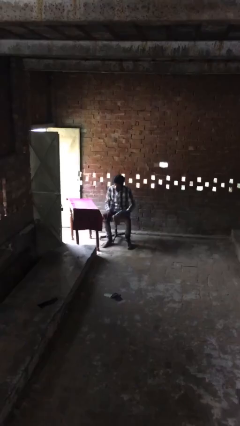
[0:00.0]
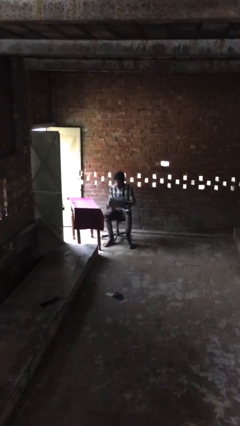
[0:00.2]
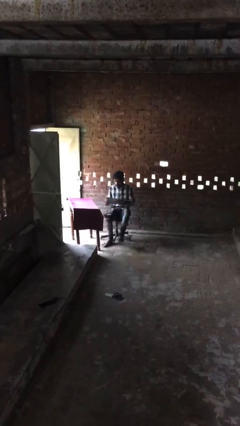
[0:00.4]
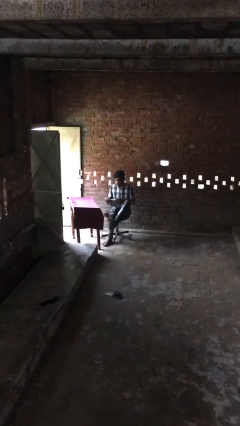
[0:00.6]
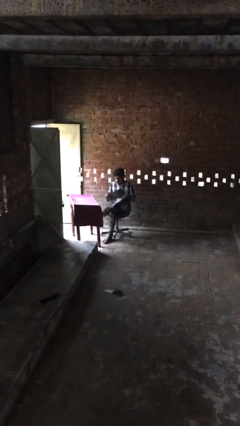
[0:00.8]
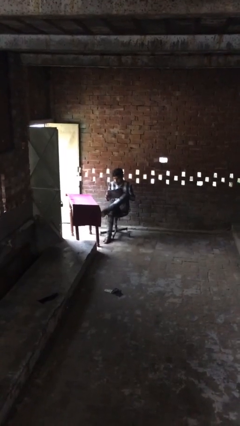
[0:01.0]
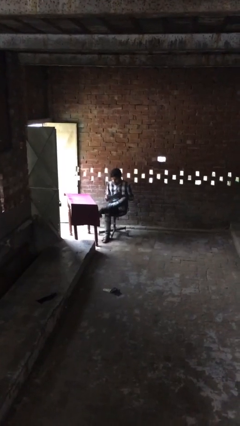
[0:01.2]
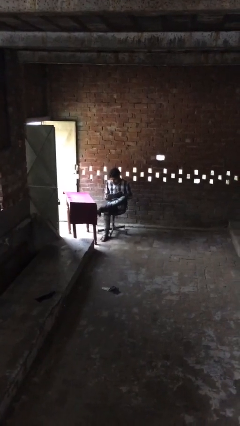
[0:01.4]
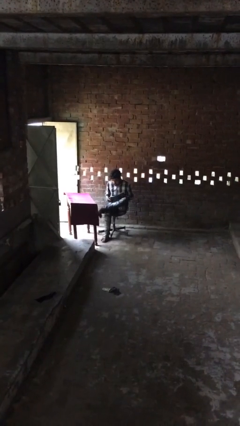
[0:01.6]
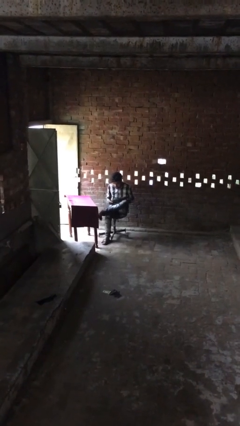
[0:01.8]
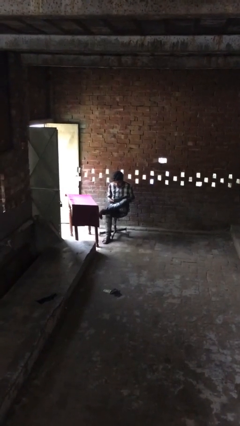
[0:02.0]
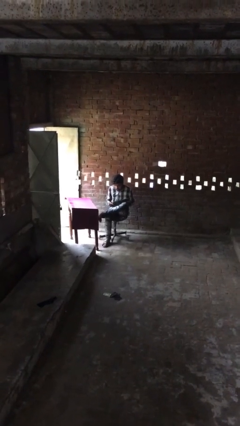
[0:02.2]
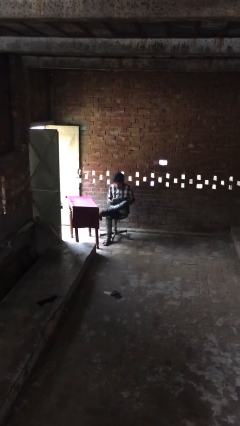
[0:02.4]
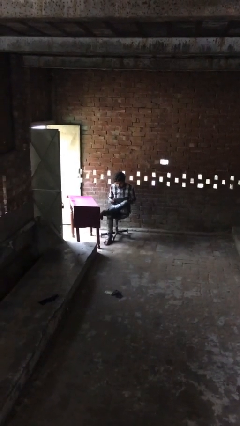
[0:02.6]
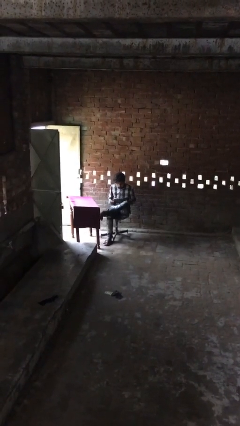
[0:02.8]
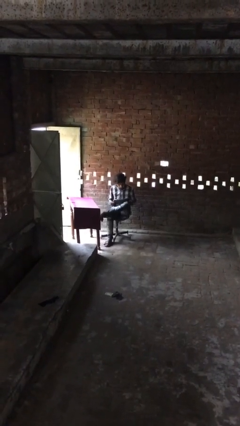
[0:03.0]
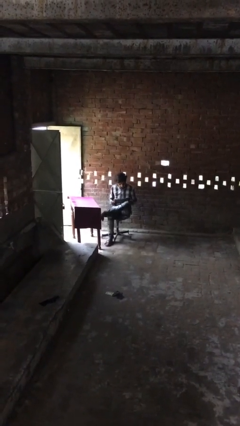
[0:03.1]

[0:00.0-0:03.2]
person reads document

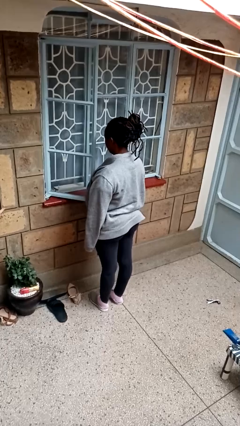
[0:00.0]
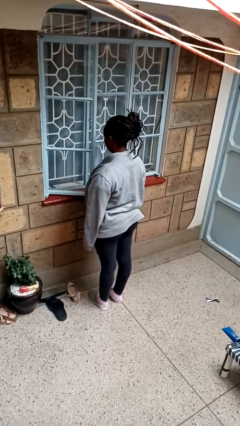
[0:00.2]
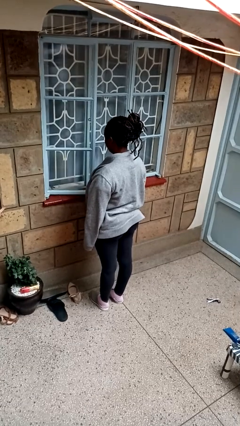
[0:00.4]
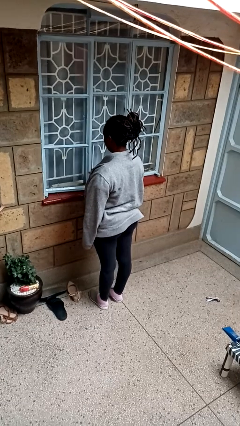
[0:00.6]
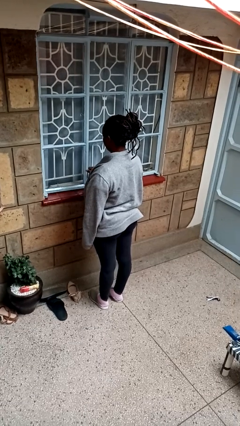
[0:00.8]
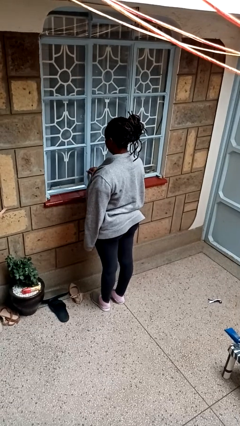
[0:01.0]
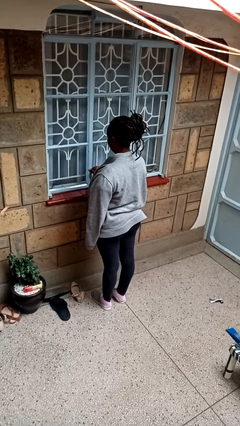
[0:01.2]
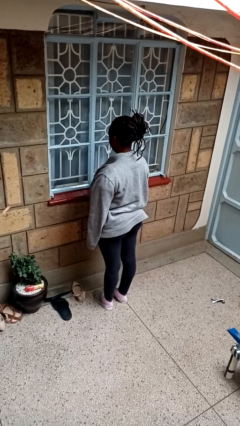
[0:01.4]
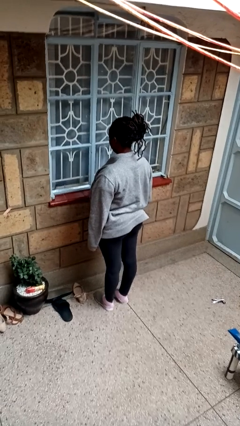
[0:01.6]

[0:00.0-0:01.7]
person closes home window

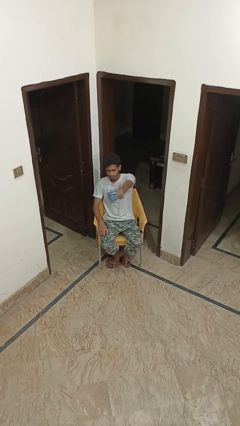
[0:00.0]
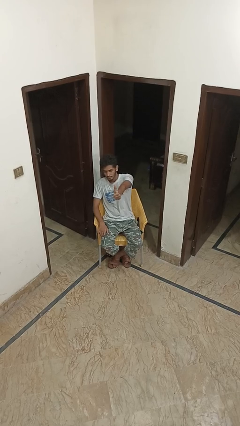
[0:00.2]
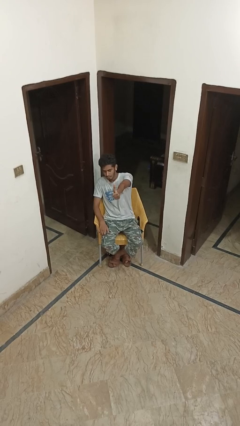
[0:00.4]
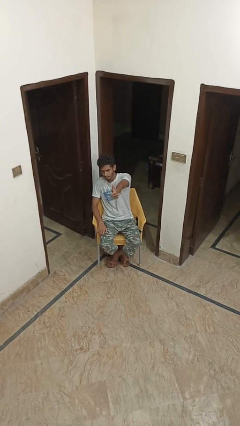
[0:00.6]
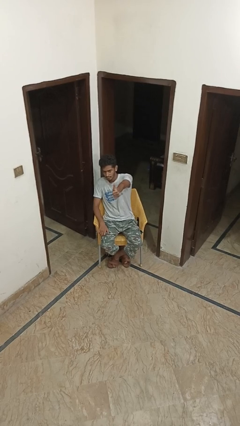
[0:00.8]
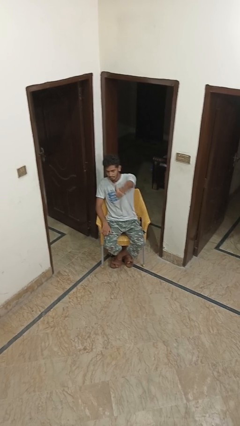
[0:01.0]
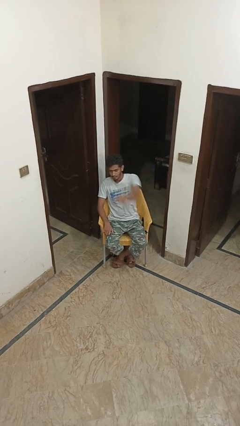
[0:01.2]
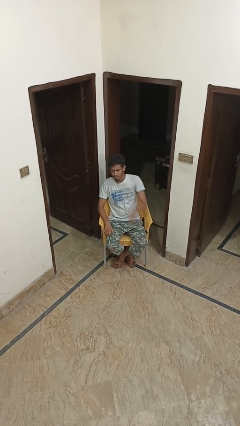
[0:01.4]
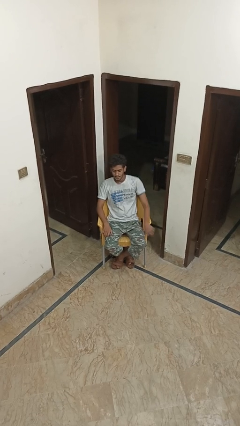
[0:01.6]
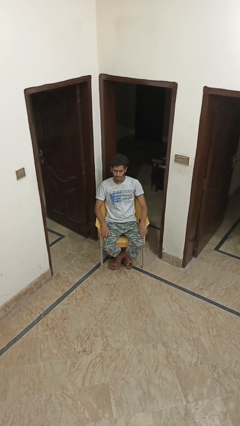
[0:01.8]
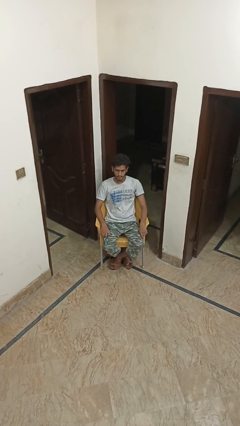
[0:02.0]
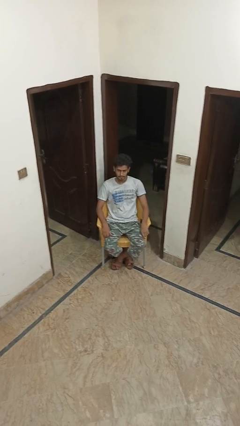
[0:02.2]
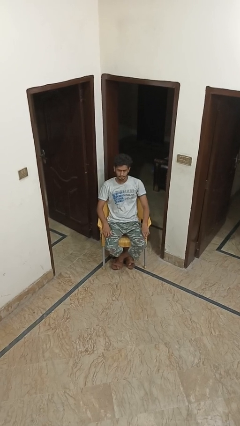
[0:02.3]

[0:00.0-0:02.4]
person gestures thumbs up

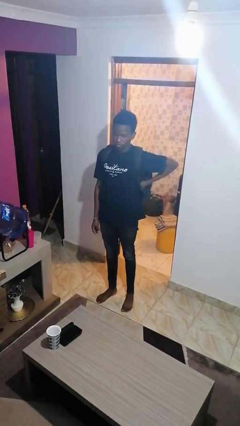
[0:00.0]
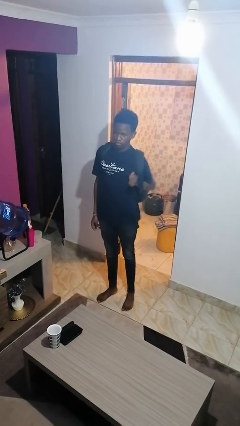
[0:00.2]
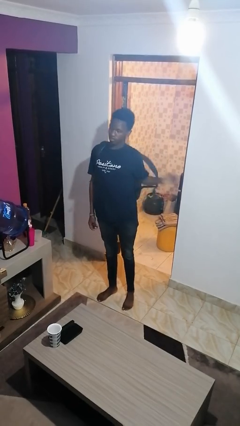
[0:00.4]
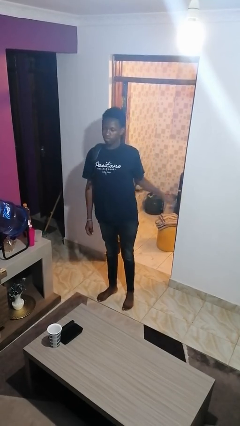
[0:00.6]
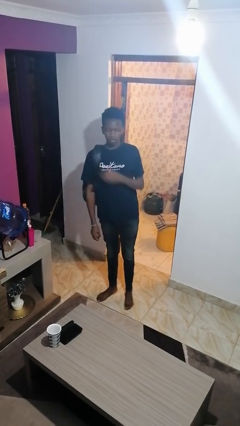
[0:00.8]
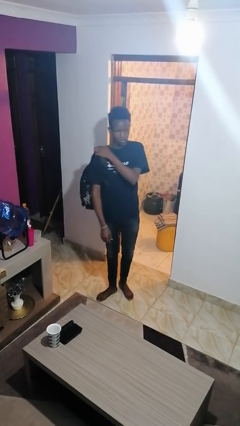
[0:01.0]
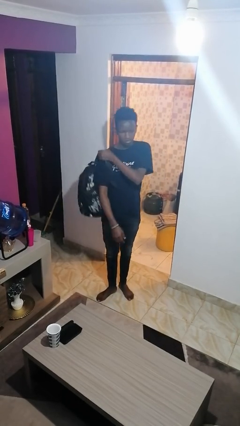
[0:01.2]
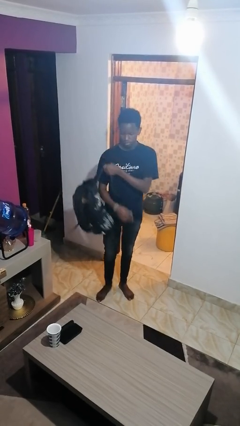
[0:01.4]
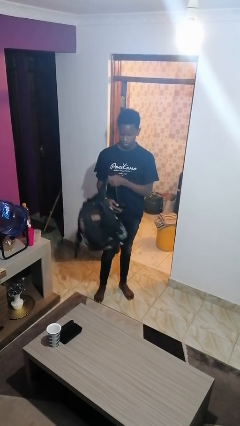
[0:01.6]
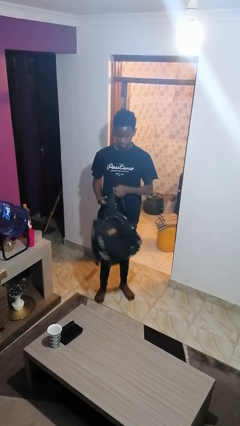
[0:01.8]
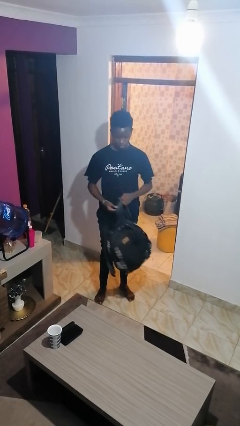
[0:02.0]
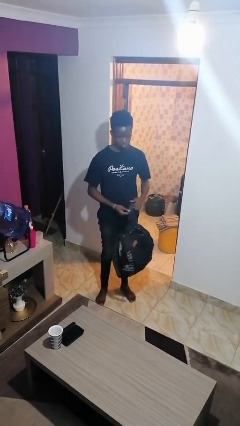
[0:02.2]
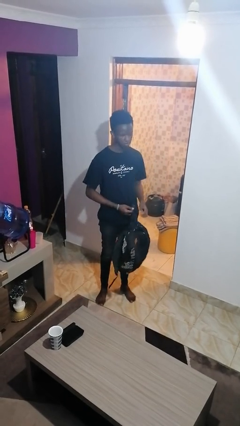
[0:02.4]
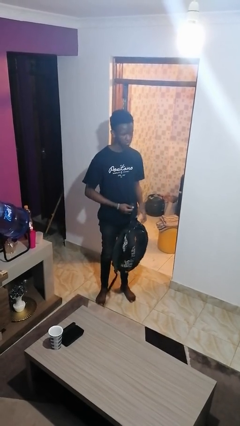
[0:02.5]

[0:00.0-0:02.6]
person takes off backpack

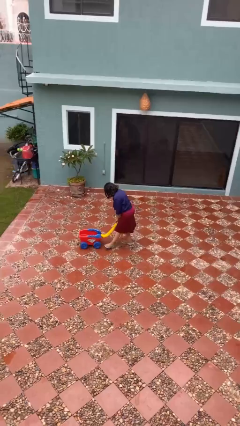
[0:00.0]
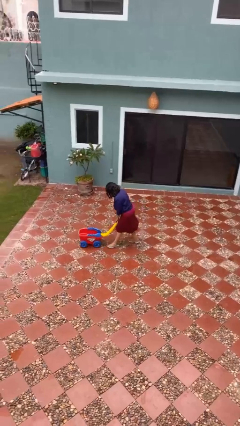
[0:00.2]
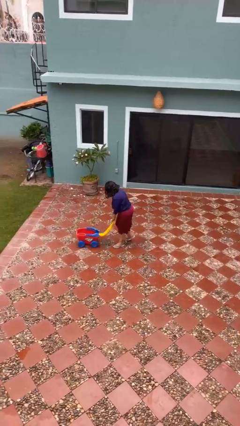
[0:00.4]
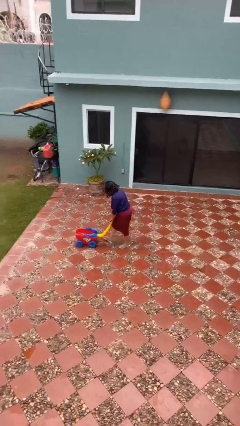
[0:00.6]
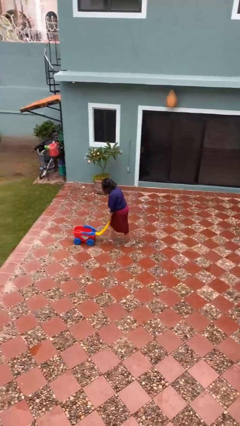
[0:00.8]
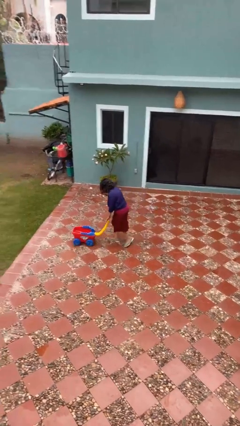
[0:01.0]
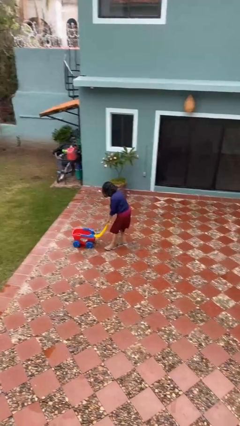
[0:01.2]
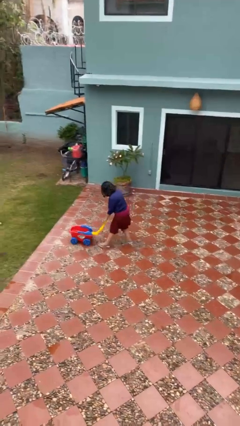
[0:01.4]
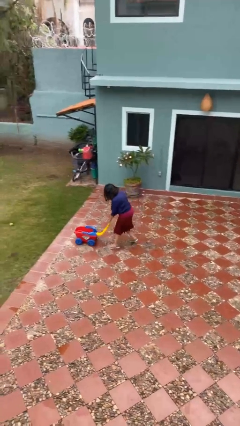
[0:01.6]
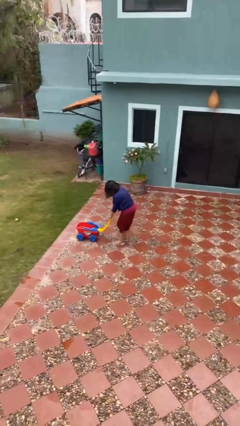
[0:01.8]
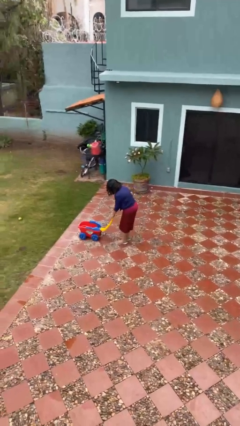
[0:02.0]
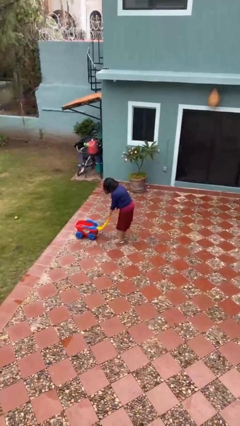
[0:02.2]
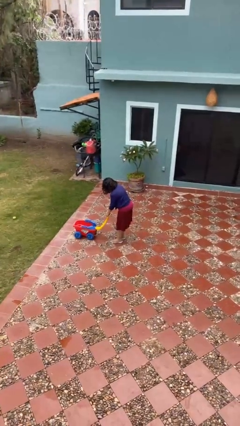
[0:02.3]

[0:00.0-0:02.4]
person pushes wheeled cart

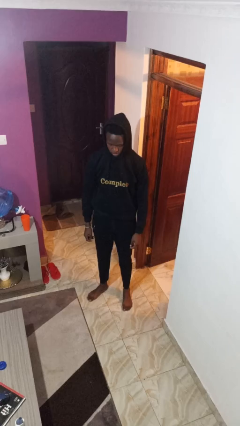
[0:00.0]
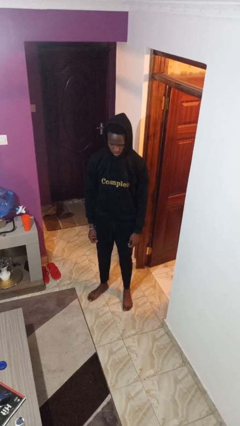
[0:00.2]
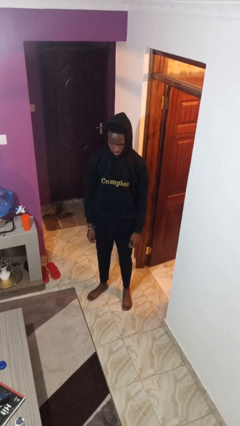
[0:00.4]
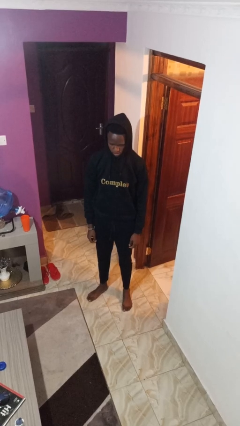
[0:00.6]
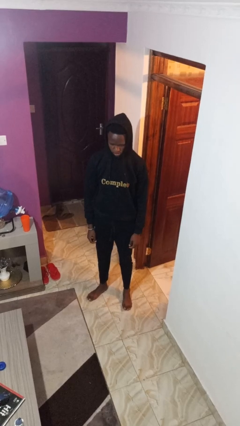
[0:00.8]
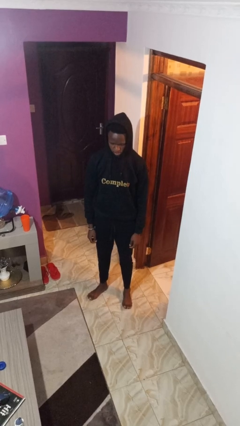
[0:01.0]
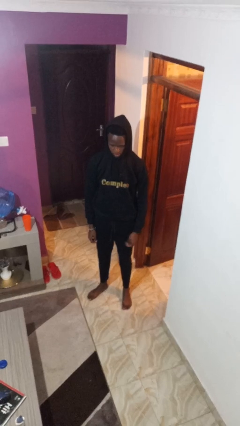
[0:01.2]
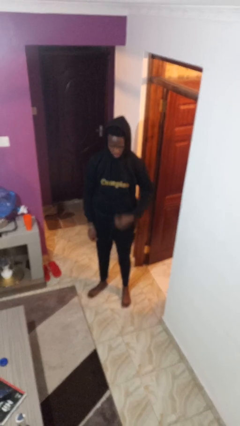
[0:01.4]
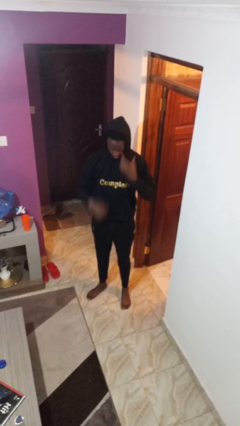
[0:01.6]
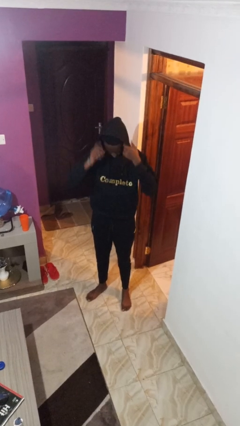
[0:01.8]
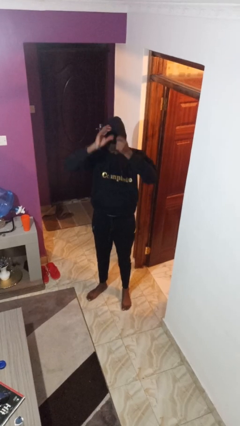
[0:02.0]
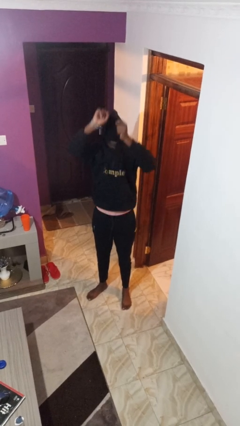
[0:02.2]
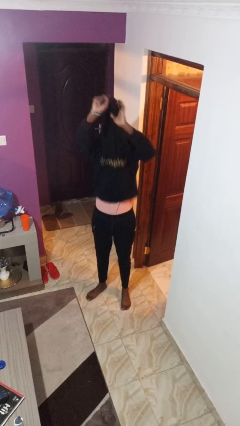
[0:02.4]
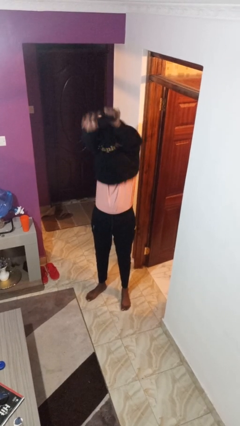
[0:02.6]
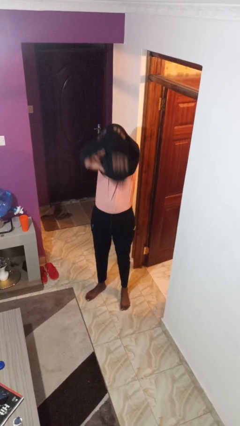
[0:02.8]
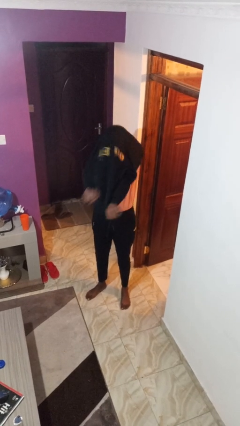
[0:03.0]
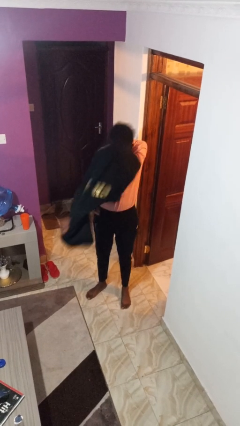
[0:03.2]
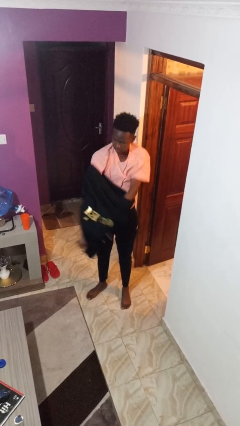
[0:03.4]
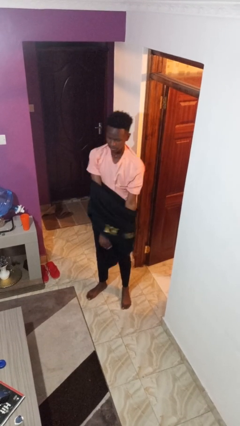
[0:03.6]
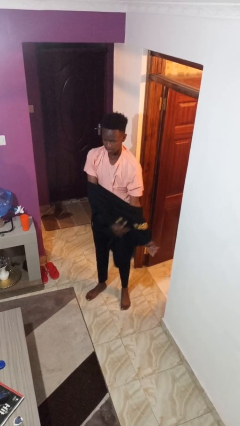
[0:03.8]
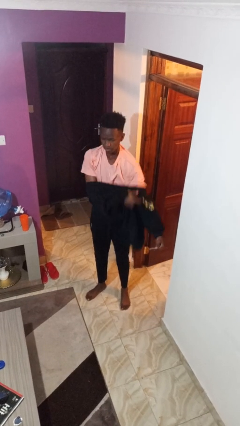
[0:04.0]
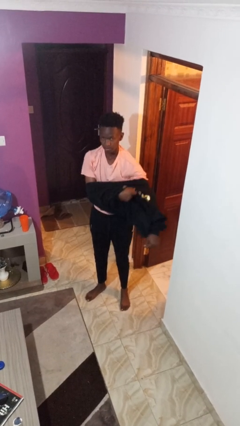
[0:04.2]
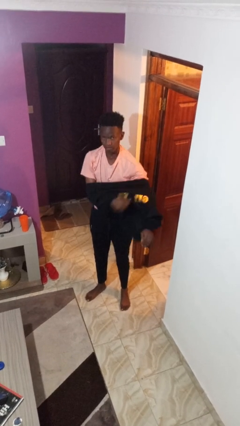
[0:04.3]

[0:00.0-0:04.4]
person takes off hoodie

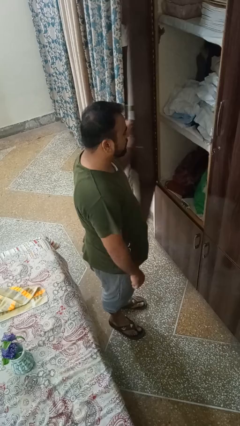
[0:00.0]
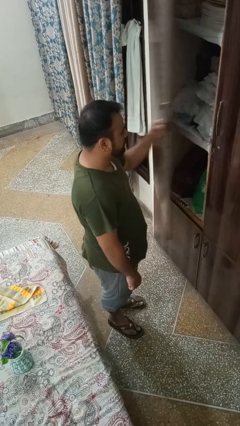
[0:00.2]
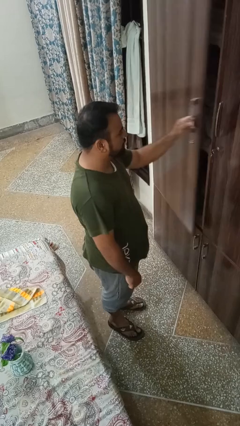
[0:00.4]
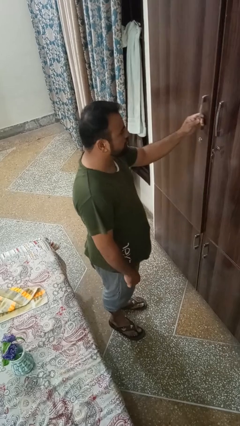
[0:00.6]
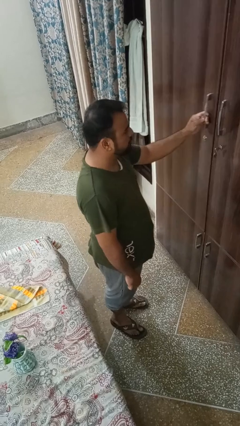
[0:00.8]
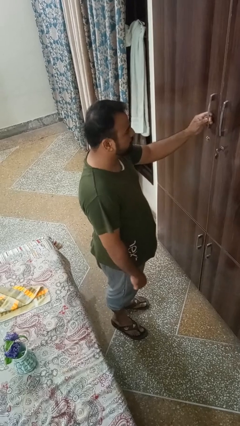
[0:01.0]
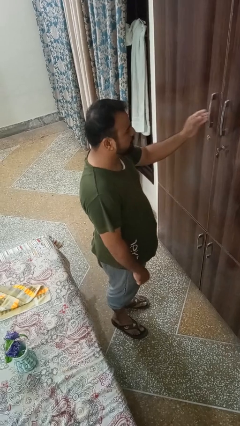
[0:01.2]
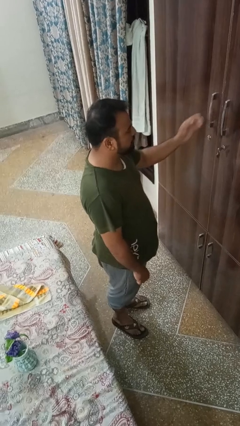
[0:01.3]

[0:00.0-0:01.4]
person closes closet door
